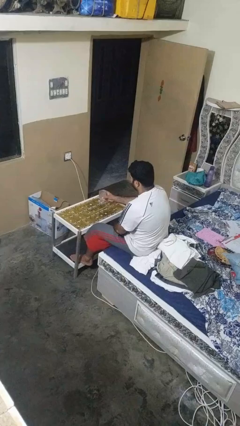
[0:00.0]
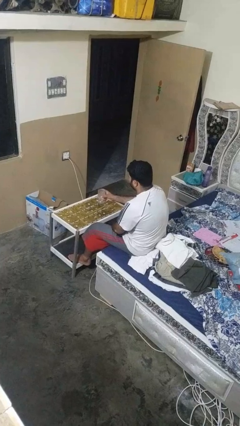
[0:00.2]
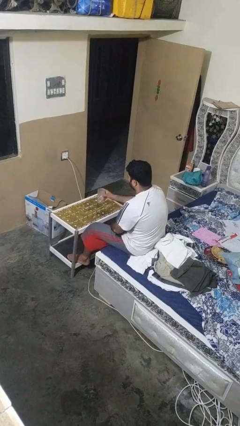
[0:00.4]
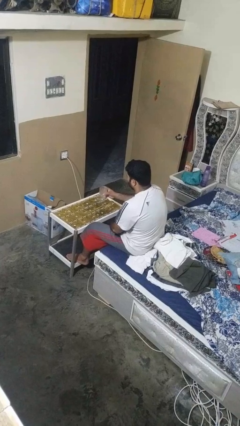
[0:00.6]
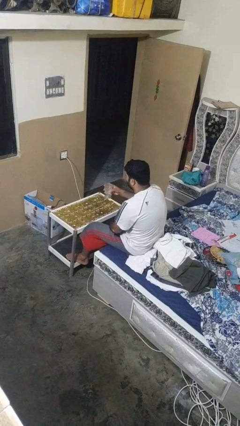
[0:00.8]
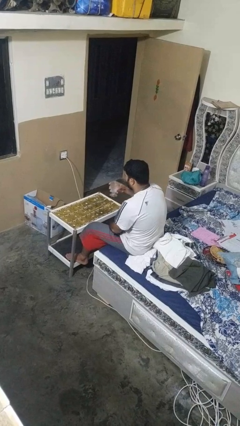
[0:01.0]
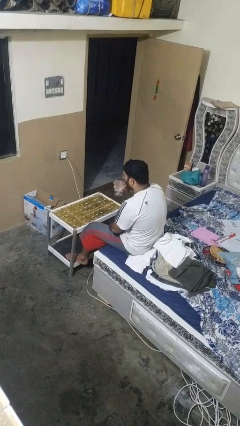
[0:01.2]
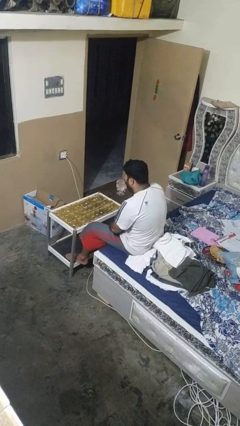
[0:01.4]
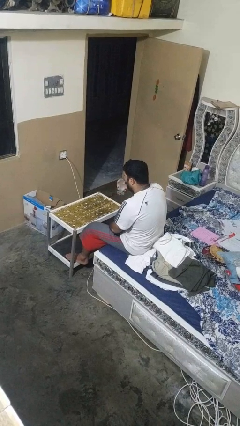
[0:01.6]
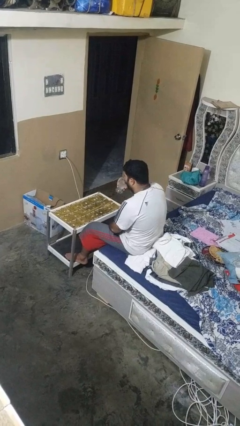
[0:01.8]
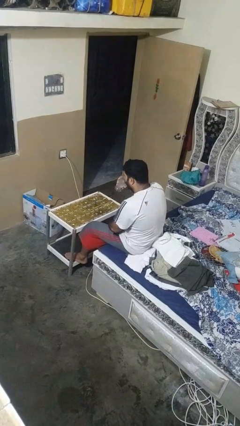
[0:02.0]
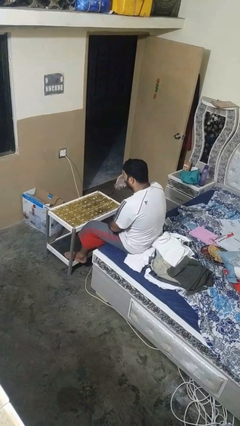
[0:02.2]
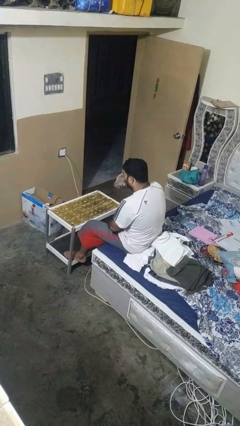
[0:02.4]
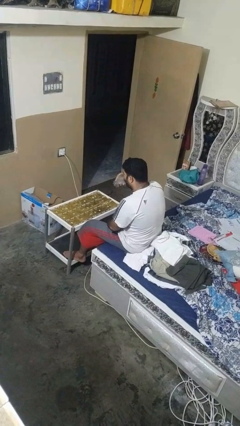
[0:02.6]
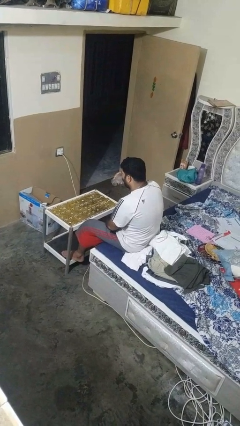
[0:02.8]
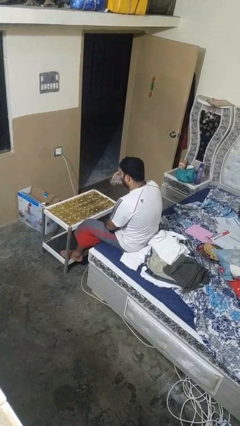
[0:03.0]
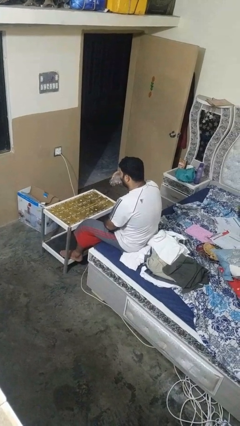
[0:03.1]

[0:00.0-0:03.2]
person drinks from shotglass

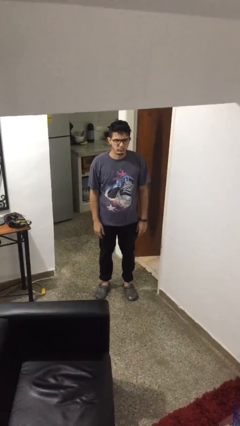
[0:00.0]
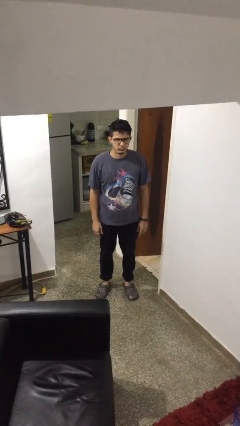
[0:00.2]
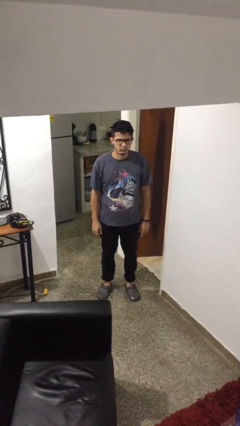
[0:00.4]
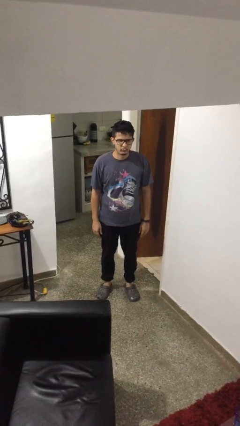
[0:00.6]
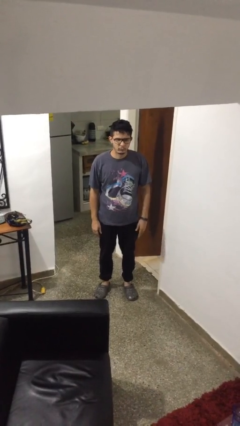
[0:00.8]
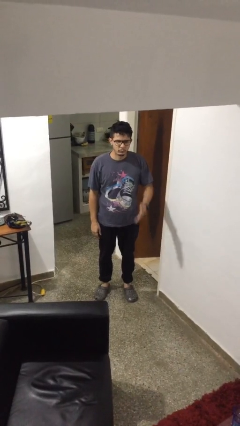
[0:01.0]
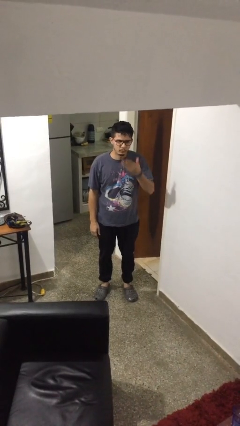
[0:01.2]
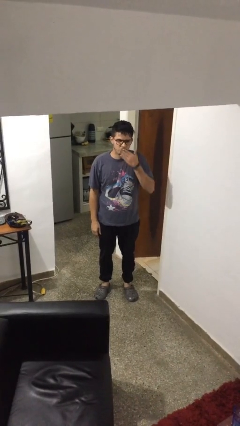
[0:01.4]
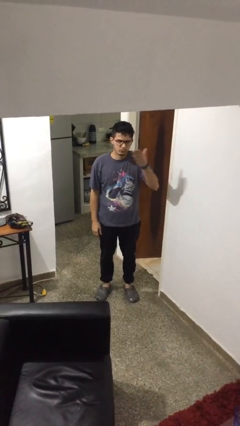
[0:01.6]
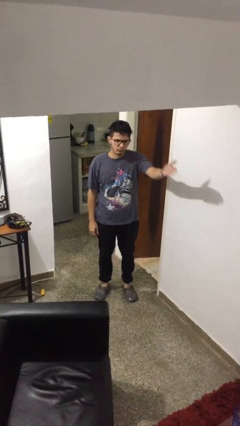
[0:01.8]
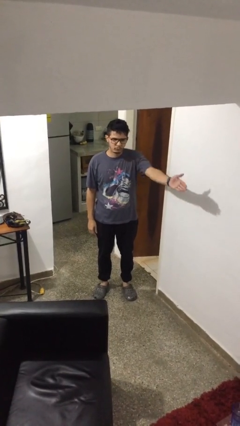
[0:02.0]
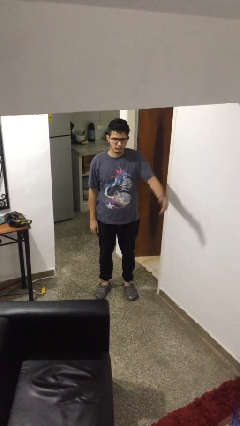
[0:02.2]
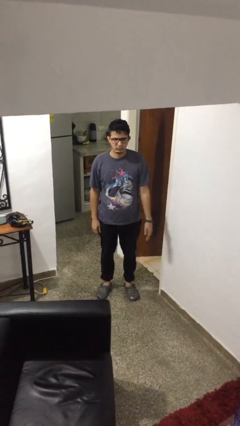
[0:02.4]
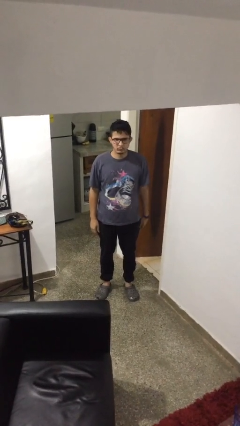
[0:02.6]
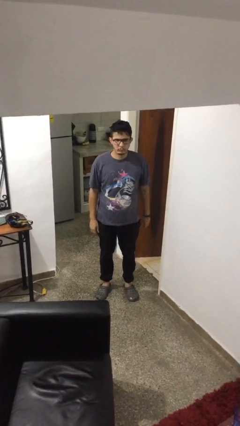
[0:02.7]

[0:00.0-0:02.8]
person gestures blow kiss

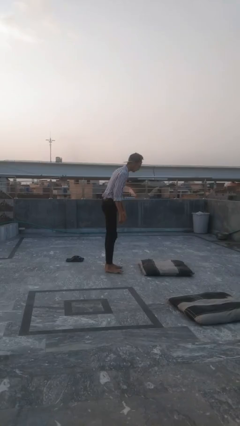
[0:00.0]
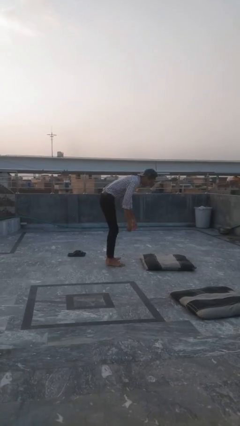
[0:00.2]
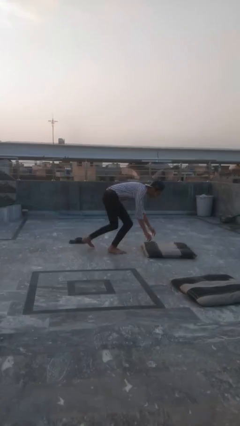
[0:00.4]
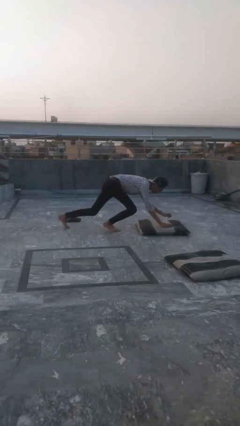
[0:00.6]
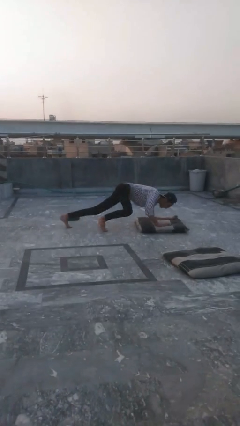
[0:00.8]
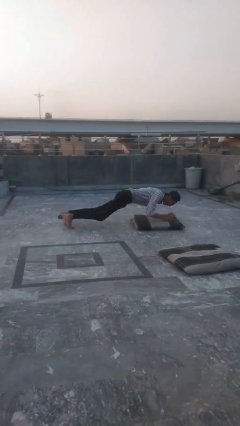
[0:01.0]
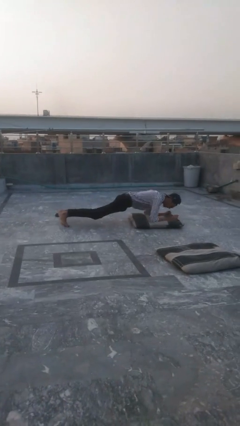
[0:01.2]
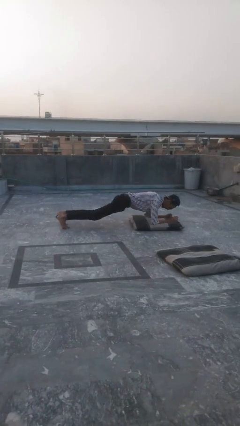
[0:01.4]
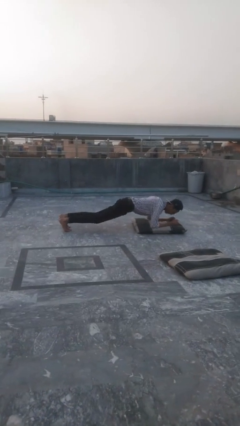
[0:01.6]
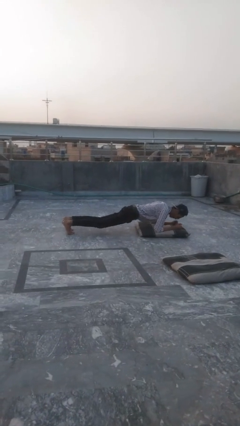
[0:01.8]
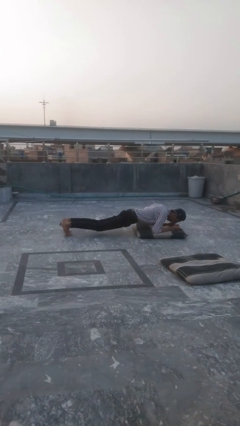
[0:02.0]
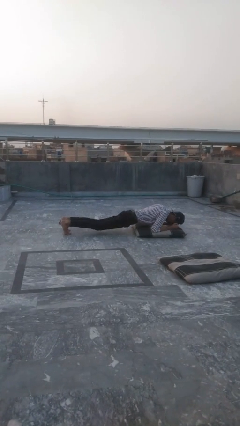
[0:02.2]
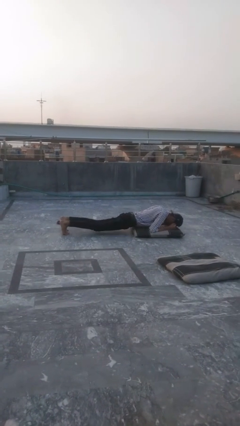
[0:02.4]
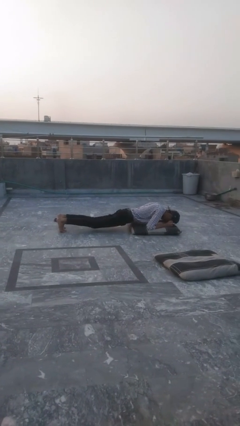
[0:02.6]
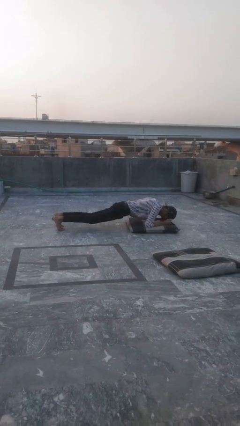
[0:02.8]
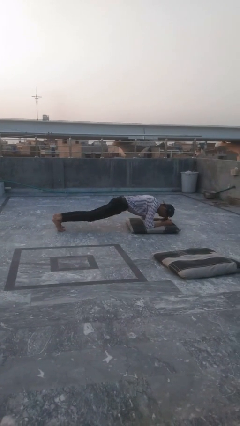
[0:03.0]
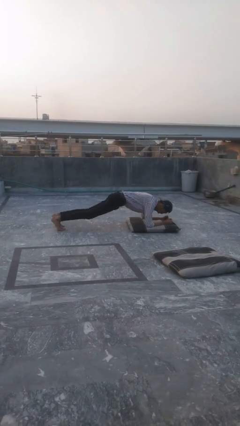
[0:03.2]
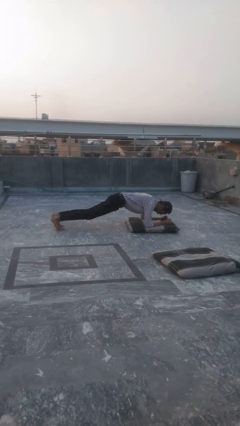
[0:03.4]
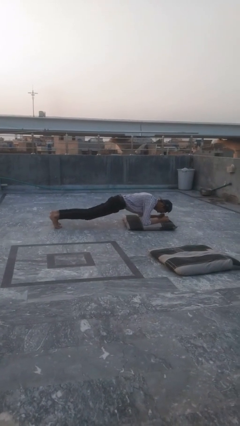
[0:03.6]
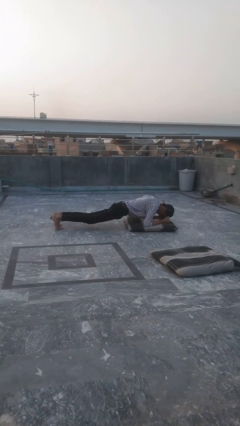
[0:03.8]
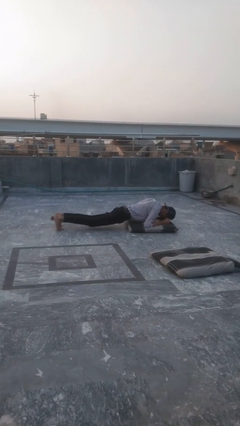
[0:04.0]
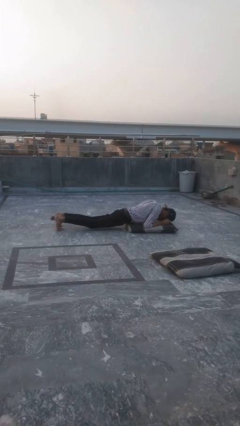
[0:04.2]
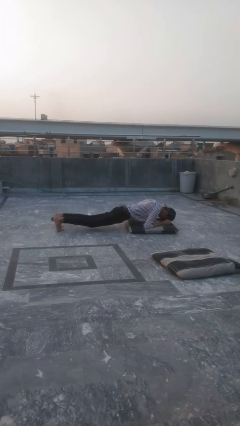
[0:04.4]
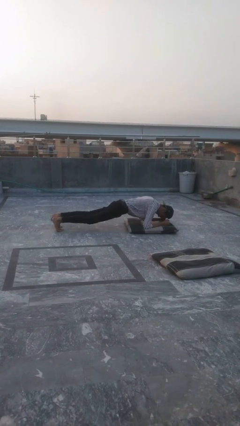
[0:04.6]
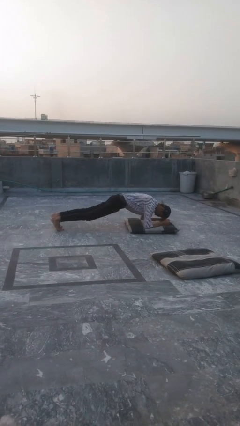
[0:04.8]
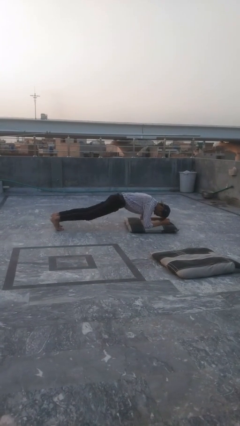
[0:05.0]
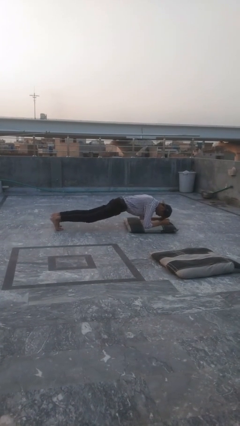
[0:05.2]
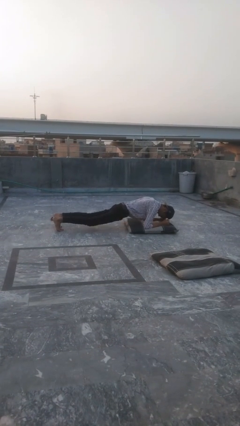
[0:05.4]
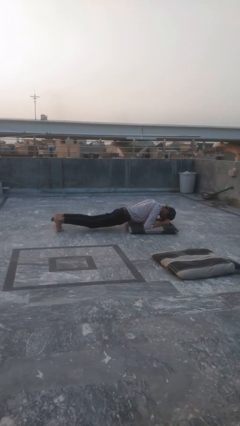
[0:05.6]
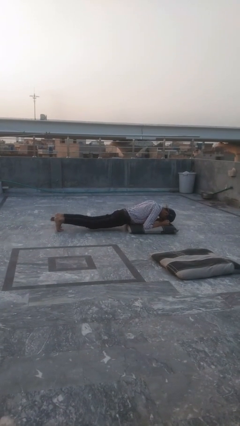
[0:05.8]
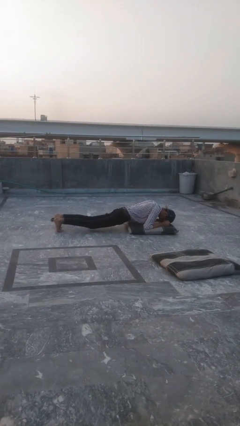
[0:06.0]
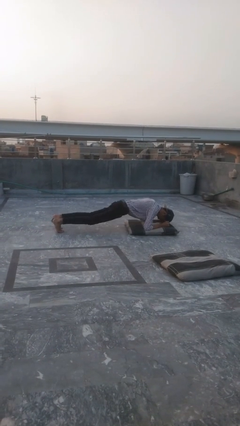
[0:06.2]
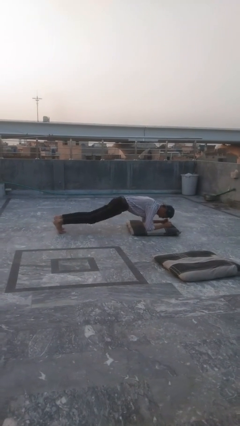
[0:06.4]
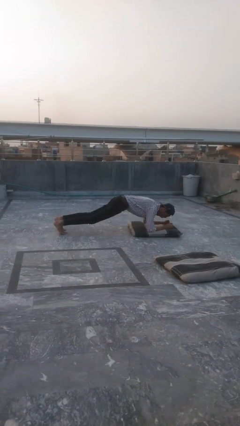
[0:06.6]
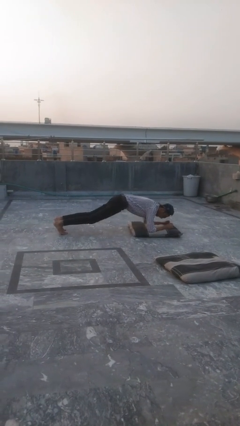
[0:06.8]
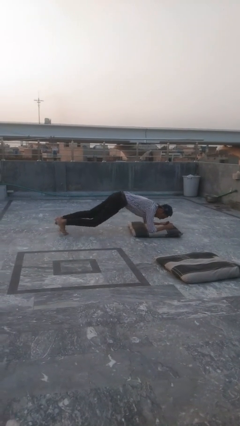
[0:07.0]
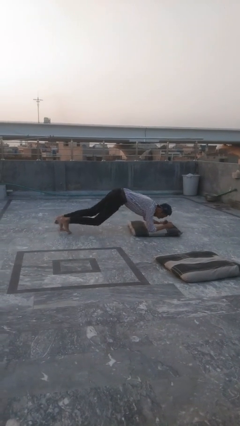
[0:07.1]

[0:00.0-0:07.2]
person exercises with plank

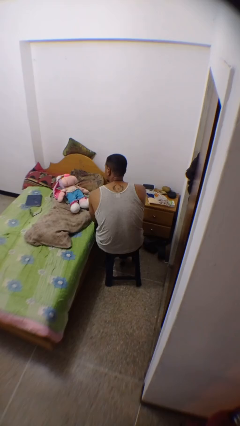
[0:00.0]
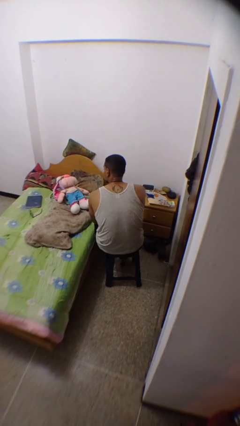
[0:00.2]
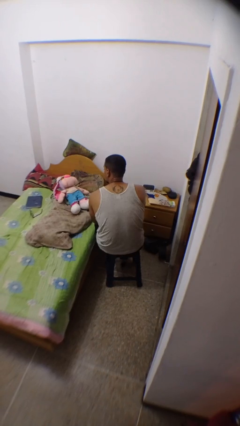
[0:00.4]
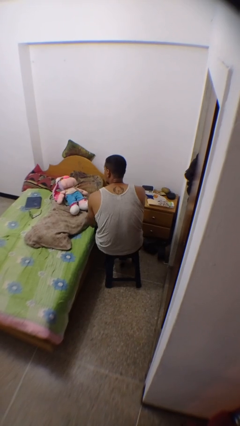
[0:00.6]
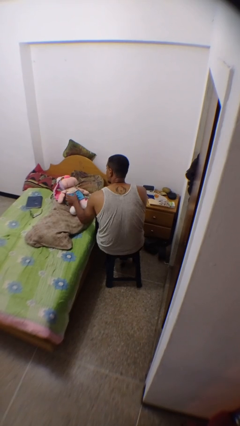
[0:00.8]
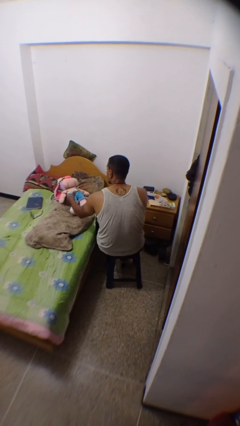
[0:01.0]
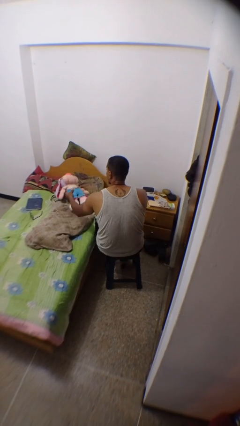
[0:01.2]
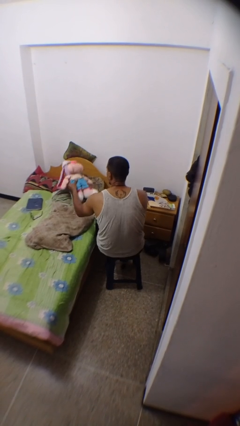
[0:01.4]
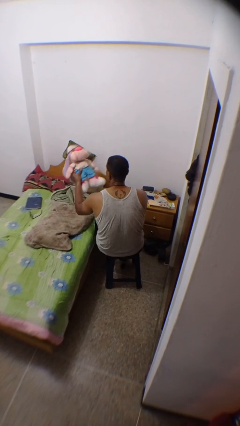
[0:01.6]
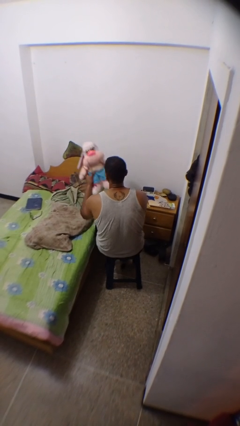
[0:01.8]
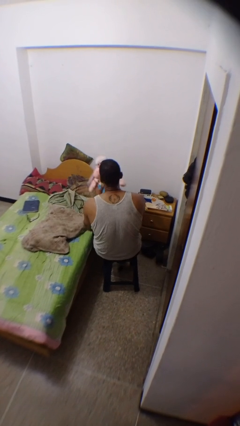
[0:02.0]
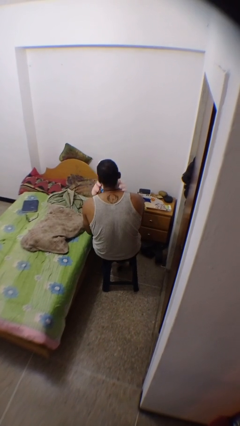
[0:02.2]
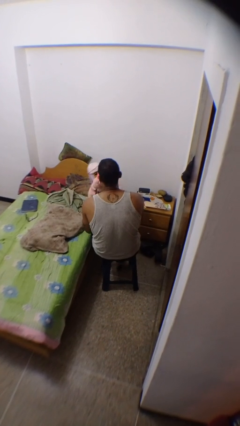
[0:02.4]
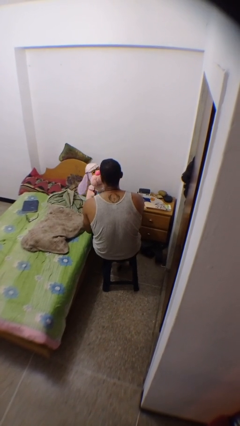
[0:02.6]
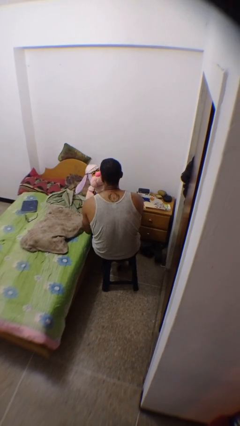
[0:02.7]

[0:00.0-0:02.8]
person picks up object from bed

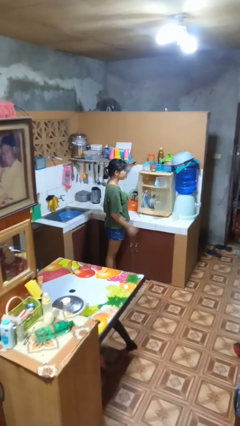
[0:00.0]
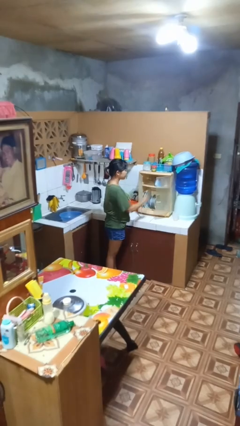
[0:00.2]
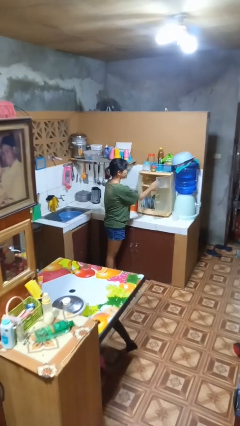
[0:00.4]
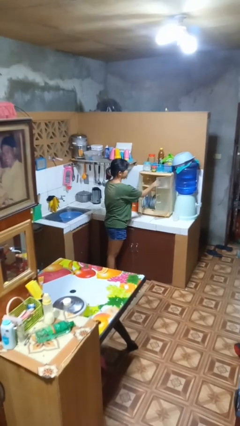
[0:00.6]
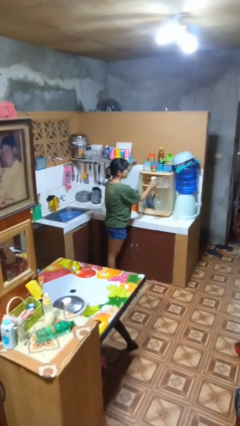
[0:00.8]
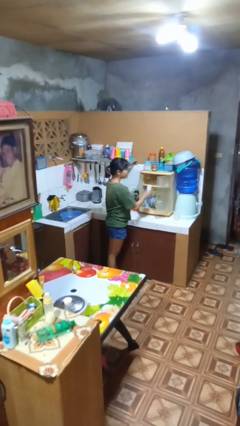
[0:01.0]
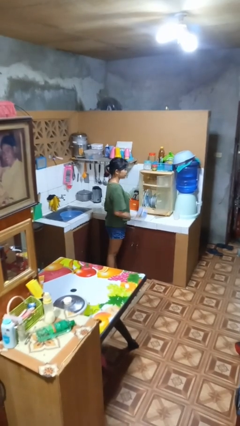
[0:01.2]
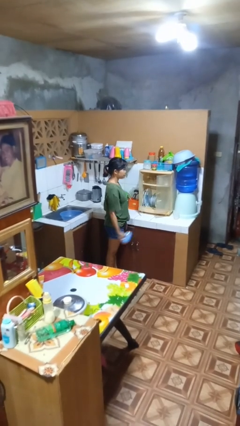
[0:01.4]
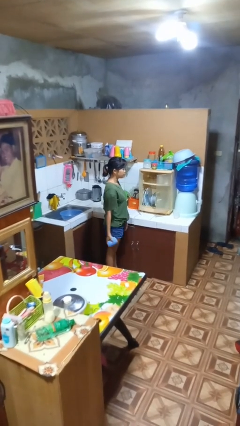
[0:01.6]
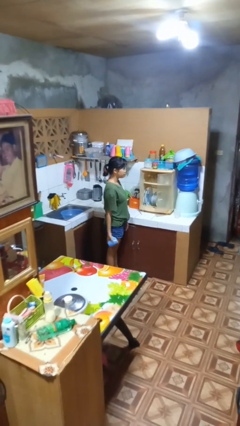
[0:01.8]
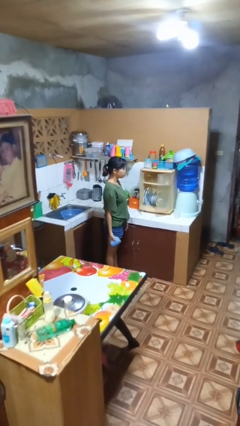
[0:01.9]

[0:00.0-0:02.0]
person takes object from cabinet
